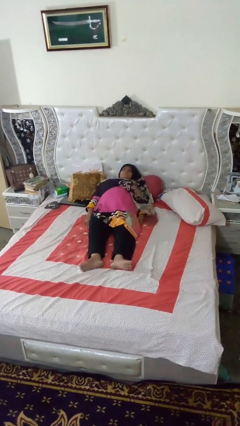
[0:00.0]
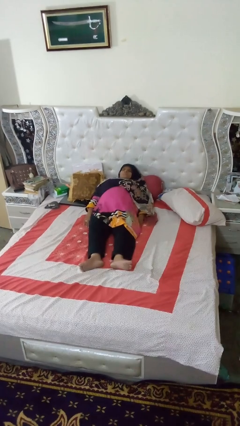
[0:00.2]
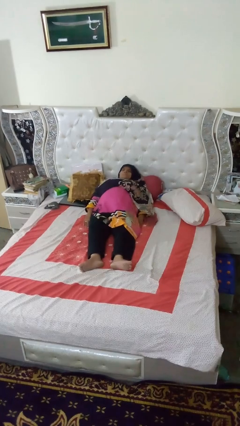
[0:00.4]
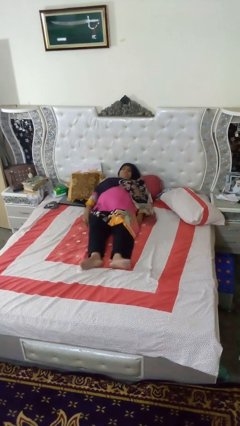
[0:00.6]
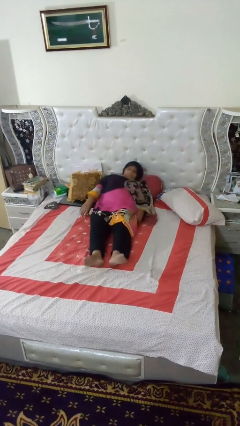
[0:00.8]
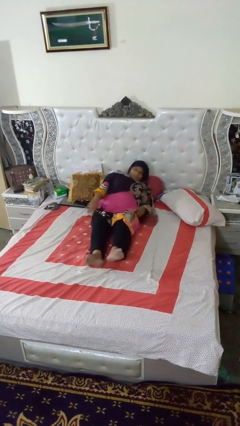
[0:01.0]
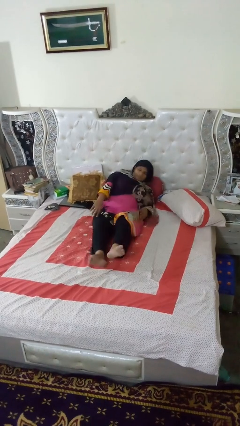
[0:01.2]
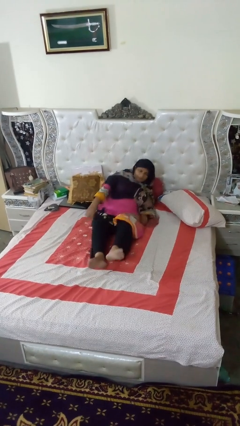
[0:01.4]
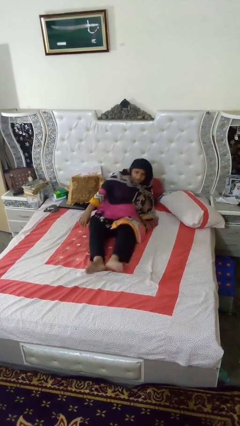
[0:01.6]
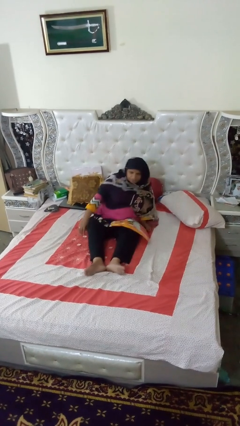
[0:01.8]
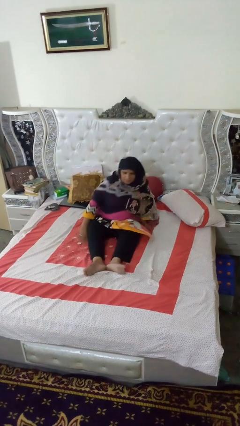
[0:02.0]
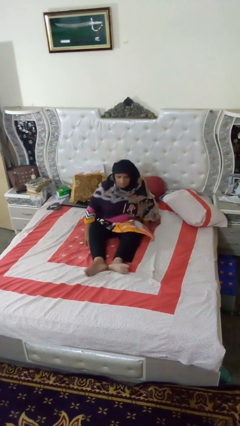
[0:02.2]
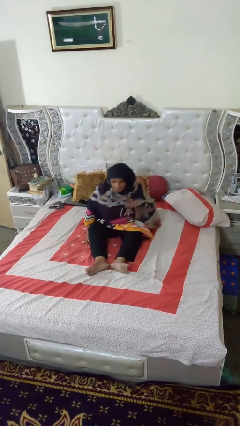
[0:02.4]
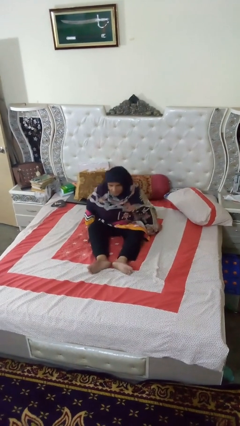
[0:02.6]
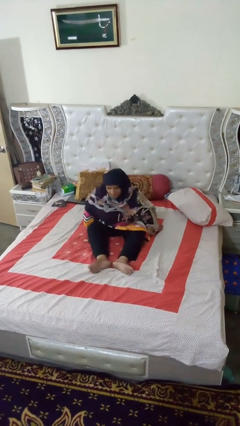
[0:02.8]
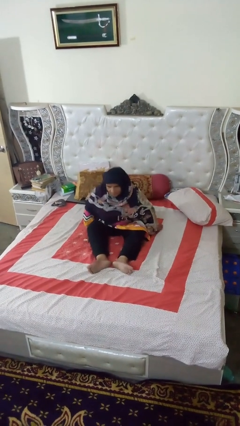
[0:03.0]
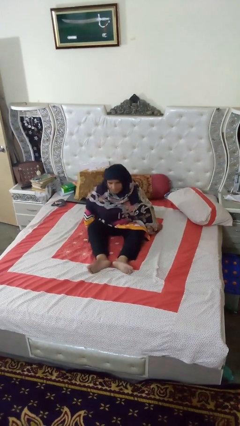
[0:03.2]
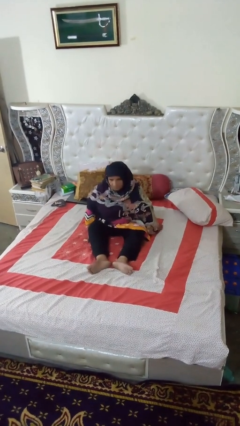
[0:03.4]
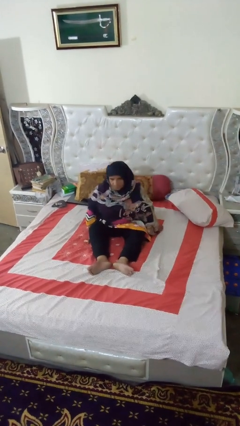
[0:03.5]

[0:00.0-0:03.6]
person stands up

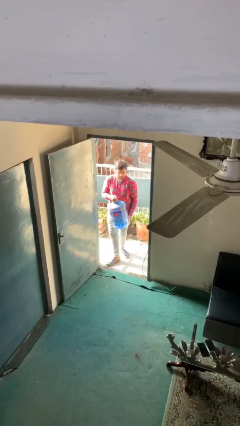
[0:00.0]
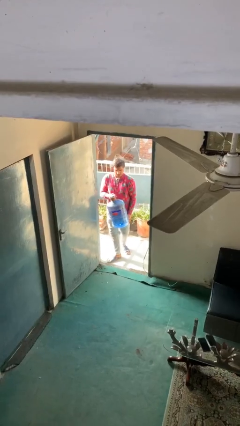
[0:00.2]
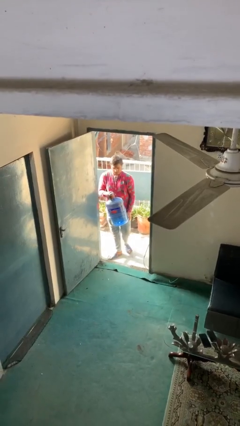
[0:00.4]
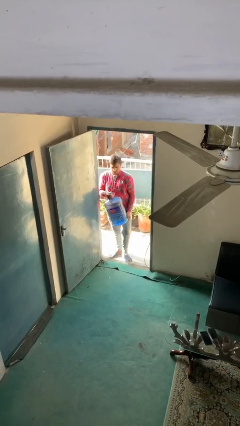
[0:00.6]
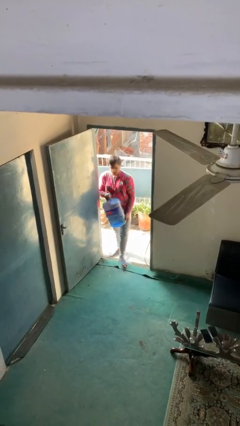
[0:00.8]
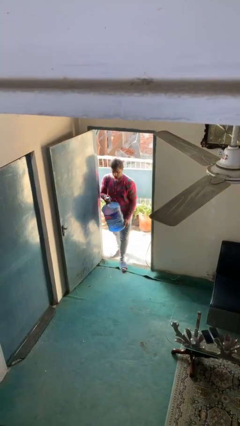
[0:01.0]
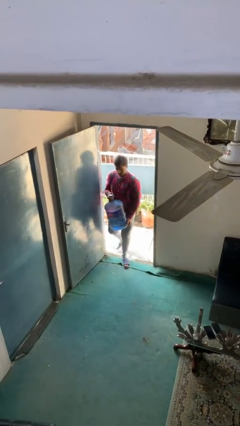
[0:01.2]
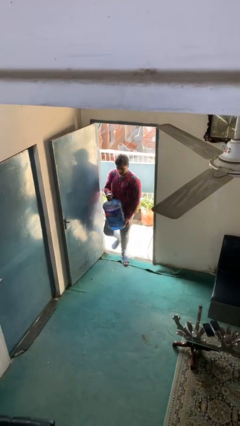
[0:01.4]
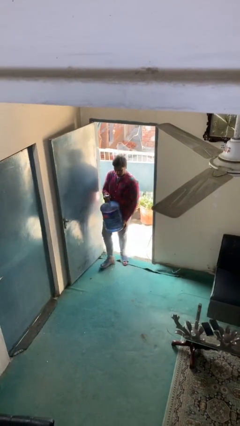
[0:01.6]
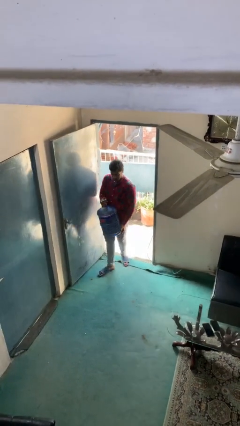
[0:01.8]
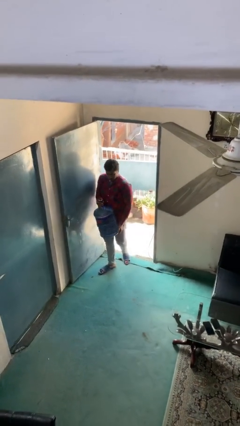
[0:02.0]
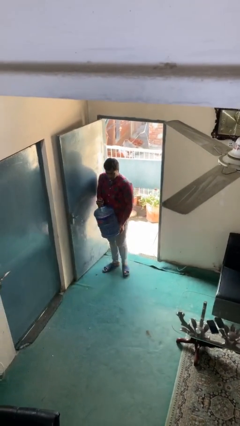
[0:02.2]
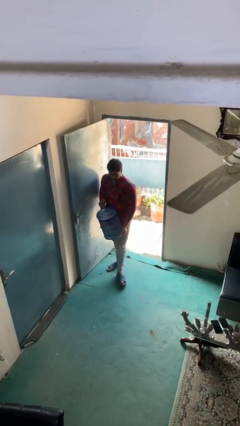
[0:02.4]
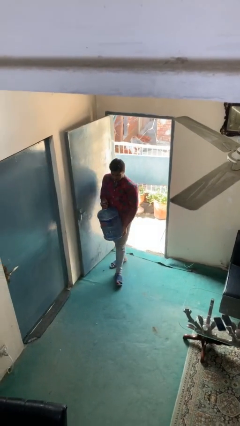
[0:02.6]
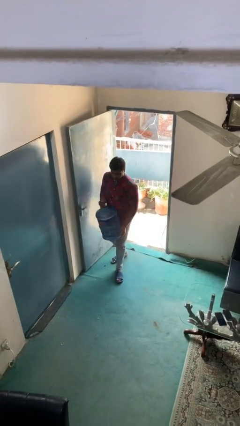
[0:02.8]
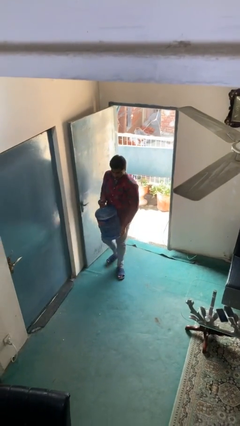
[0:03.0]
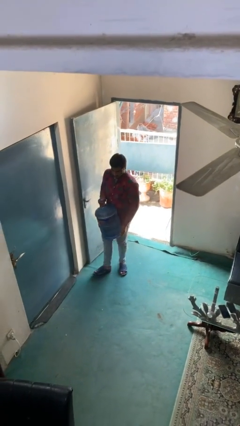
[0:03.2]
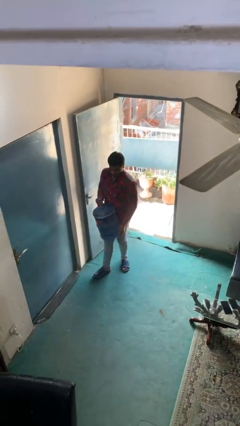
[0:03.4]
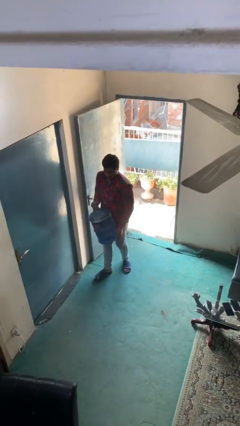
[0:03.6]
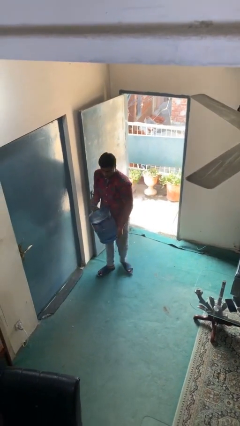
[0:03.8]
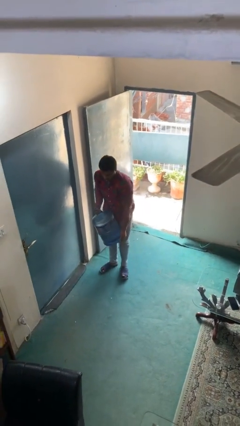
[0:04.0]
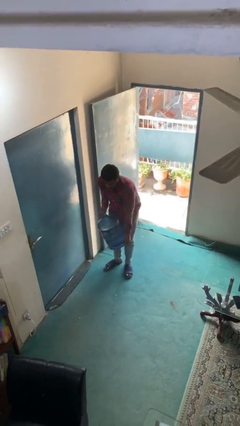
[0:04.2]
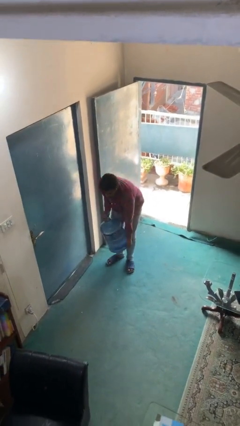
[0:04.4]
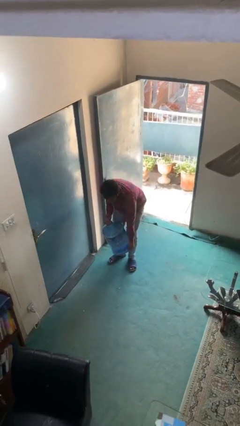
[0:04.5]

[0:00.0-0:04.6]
person carries heavy object

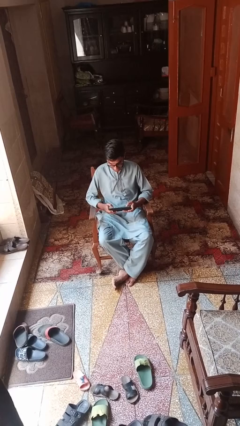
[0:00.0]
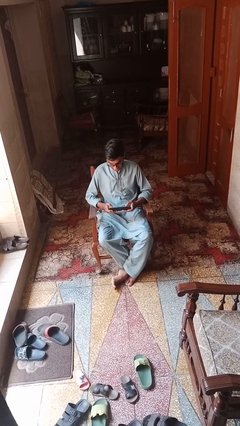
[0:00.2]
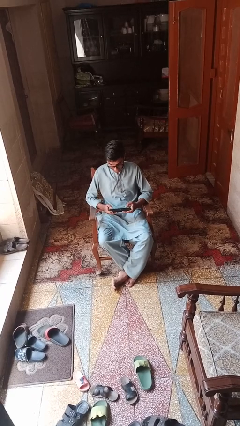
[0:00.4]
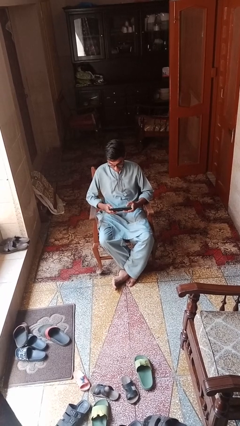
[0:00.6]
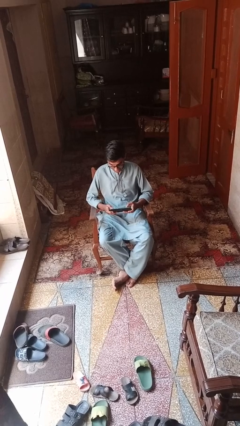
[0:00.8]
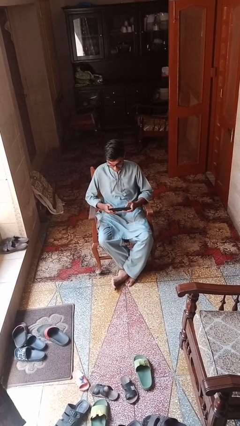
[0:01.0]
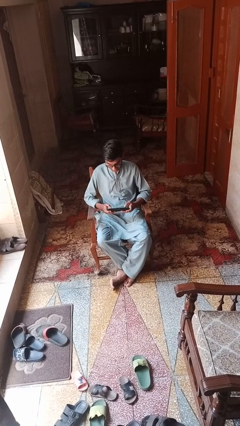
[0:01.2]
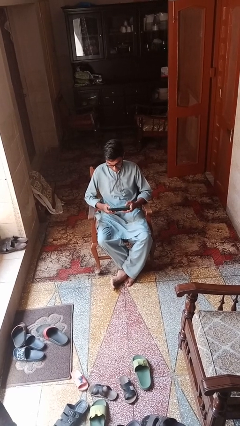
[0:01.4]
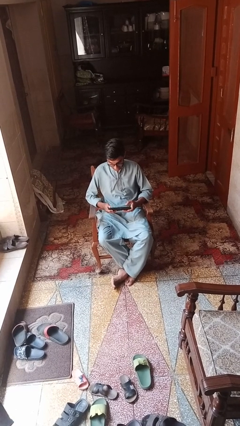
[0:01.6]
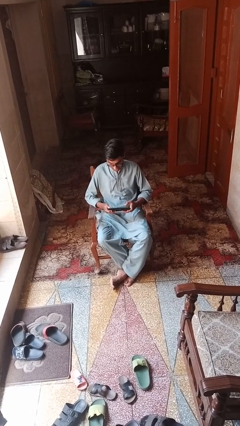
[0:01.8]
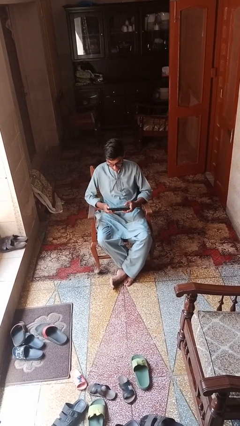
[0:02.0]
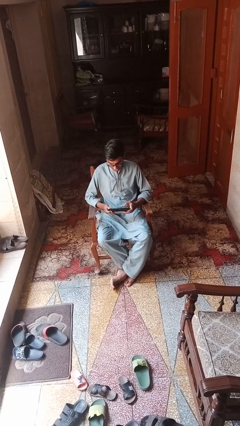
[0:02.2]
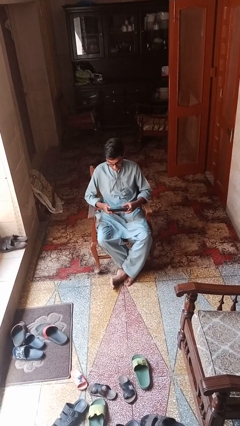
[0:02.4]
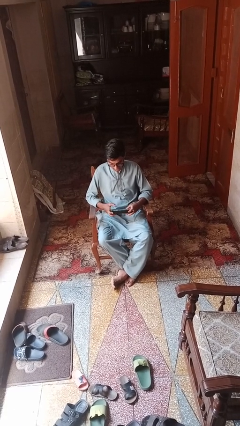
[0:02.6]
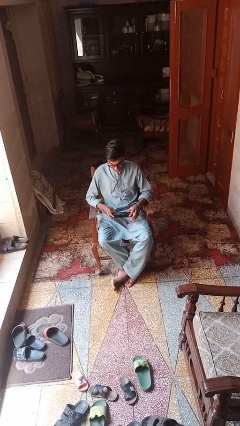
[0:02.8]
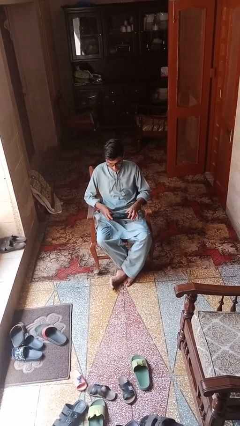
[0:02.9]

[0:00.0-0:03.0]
person interacts with tablet

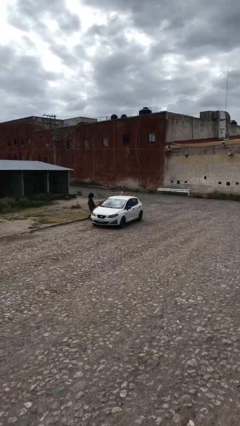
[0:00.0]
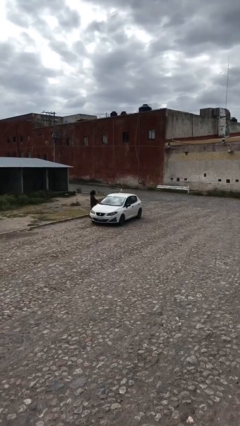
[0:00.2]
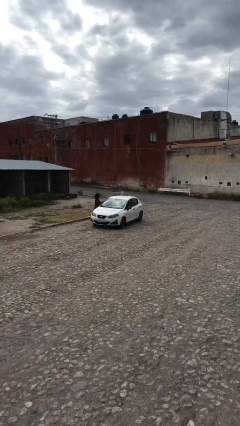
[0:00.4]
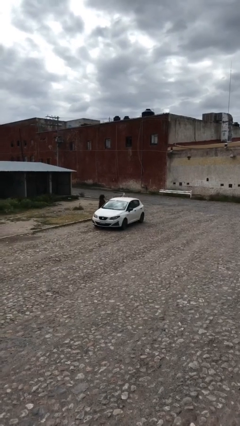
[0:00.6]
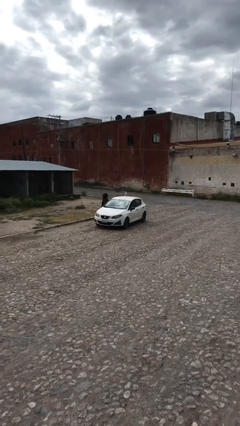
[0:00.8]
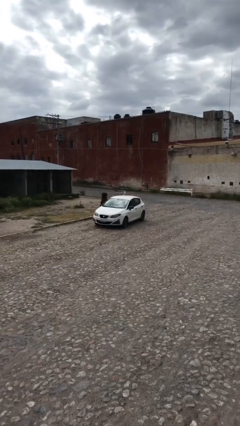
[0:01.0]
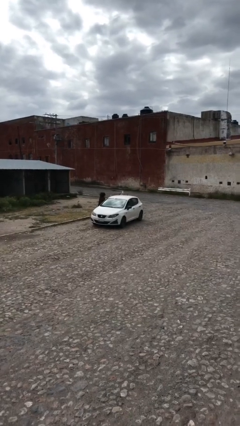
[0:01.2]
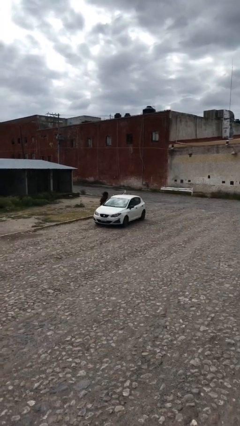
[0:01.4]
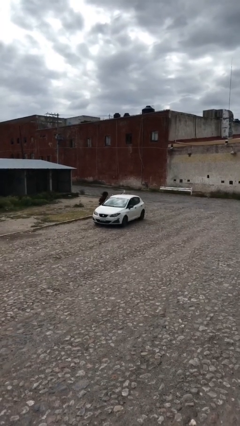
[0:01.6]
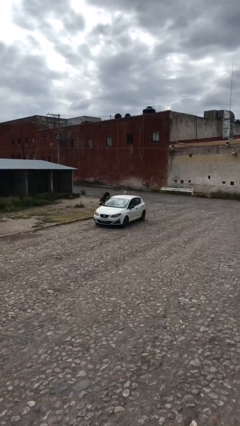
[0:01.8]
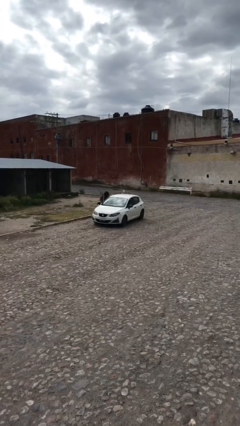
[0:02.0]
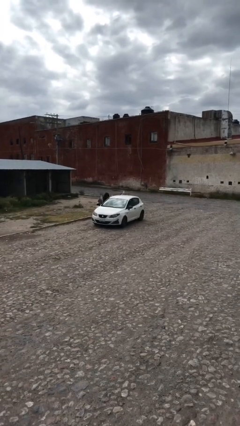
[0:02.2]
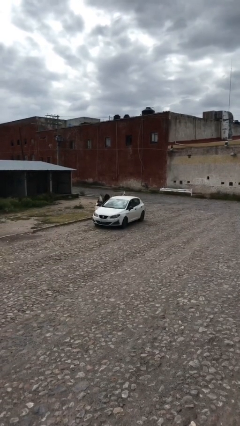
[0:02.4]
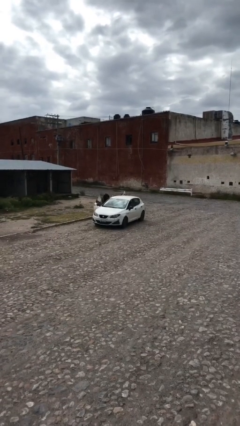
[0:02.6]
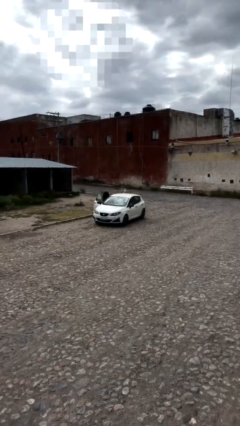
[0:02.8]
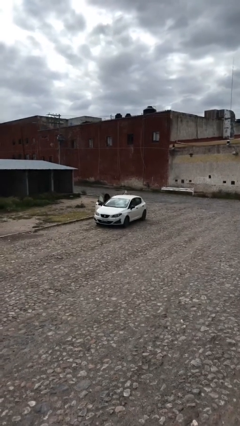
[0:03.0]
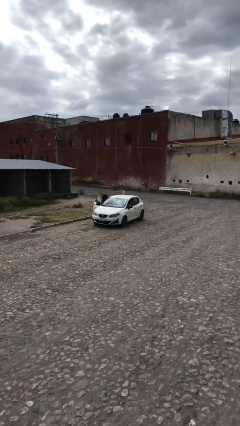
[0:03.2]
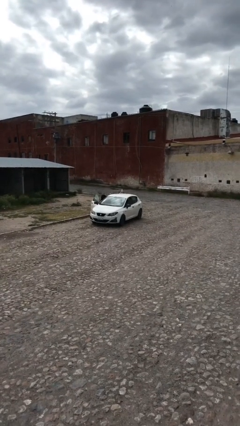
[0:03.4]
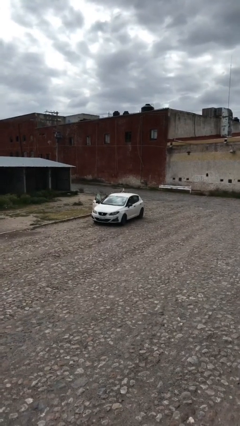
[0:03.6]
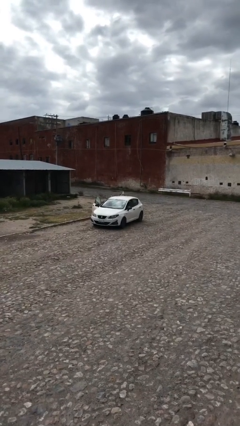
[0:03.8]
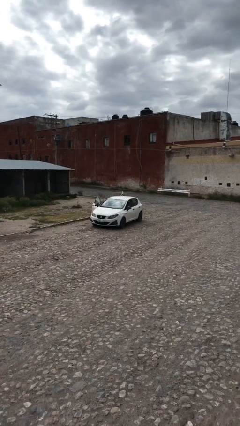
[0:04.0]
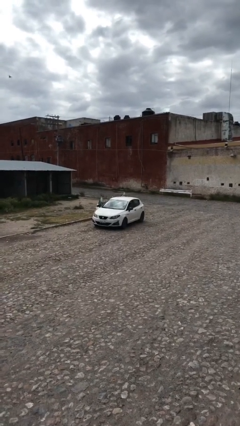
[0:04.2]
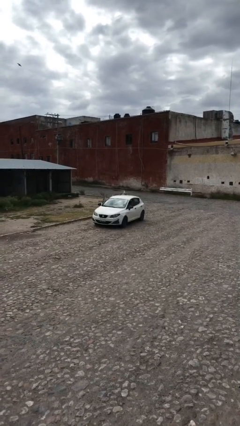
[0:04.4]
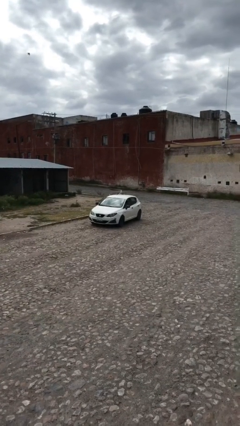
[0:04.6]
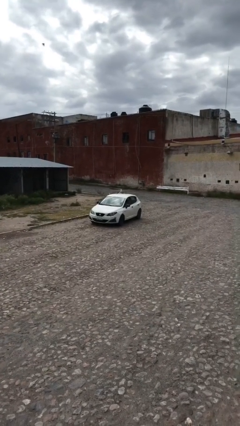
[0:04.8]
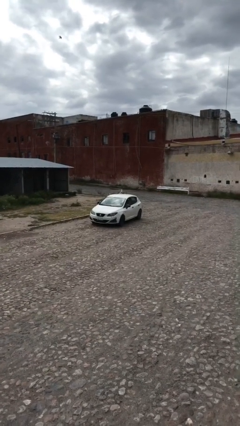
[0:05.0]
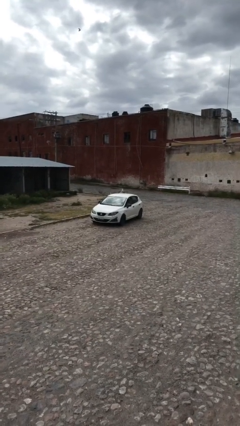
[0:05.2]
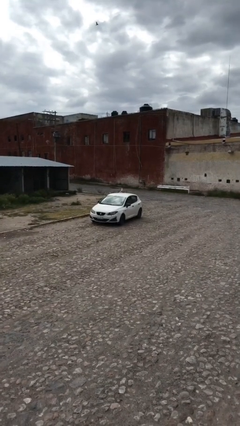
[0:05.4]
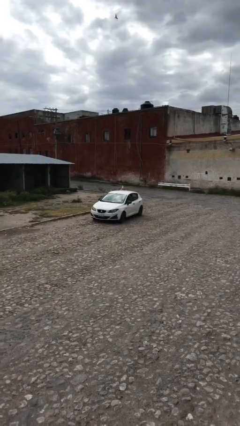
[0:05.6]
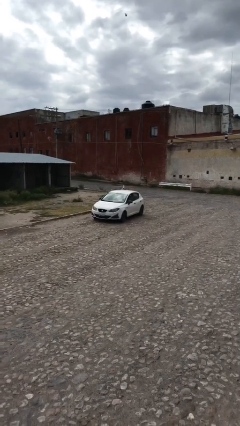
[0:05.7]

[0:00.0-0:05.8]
car picks up person

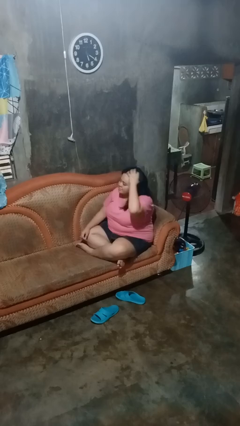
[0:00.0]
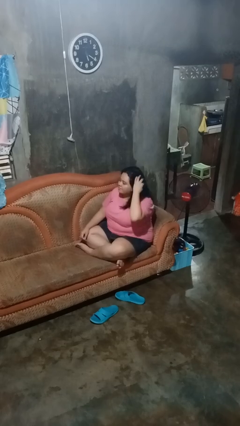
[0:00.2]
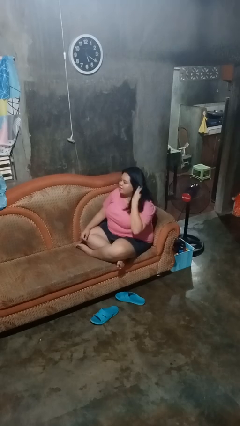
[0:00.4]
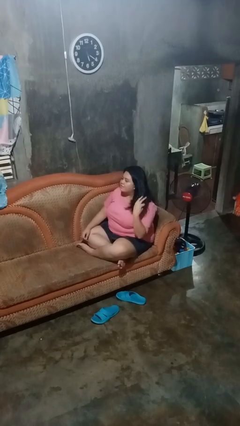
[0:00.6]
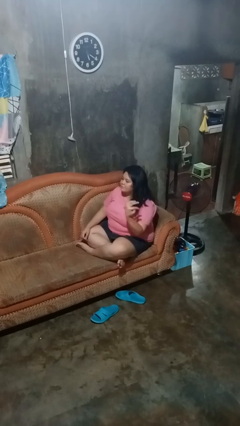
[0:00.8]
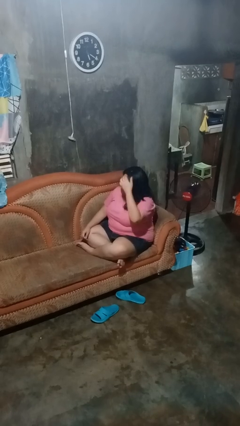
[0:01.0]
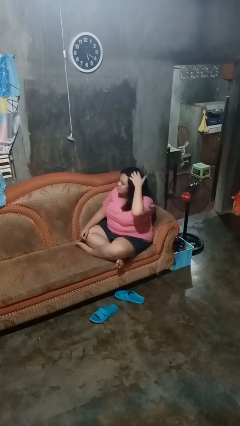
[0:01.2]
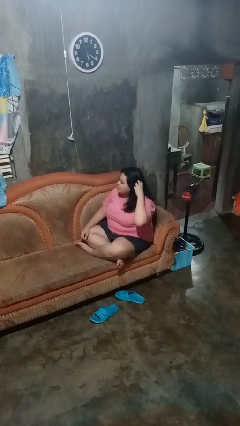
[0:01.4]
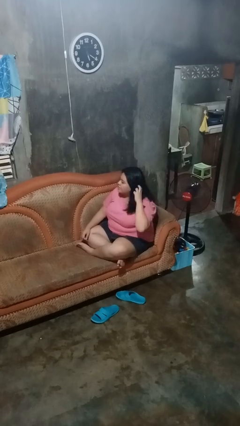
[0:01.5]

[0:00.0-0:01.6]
person strokes hair
